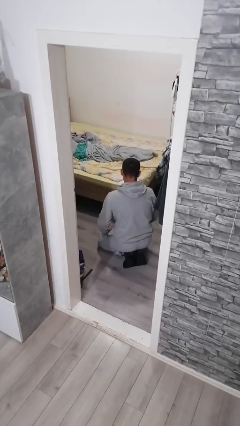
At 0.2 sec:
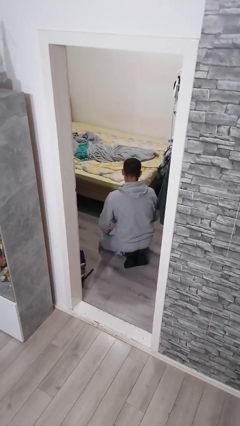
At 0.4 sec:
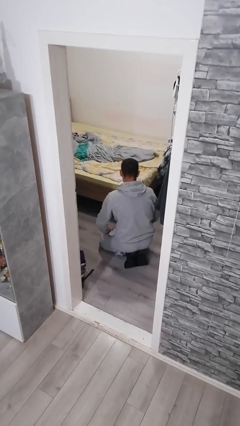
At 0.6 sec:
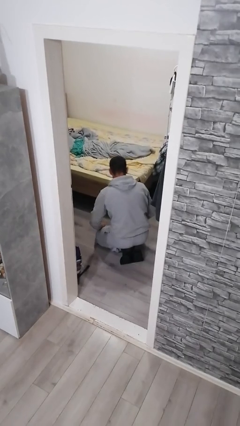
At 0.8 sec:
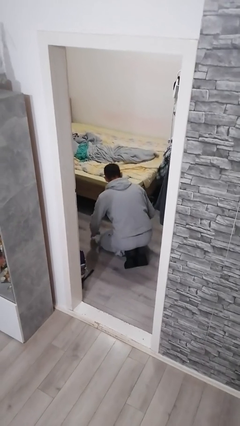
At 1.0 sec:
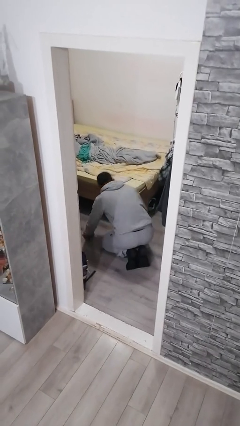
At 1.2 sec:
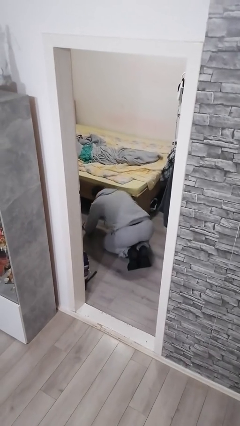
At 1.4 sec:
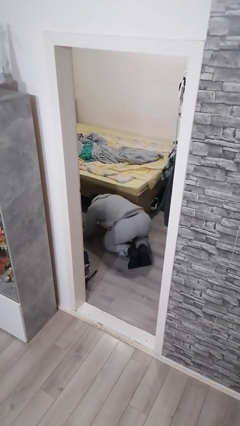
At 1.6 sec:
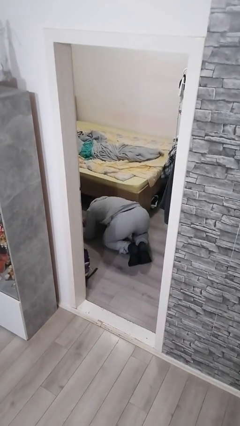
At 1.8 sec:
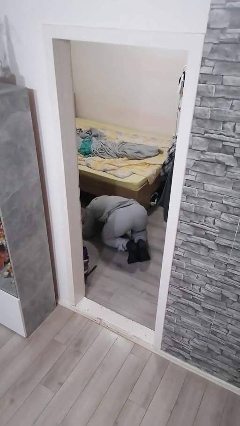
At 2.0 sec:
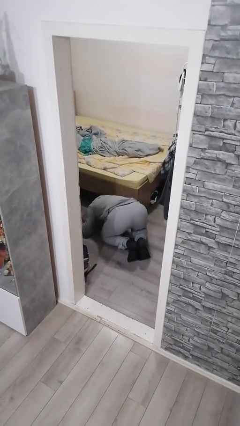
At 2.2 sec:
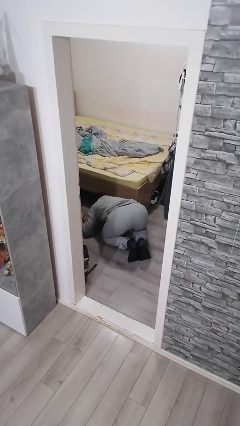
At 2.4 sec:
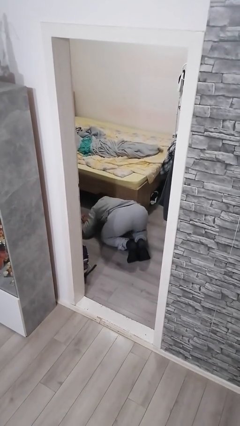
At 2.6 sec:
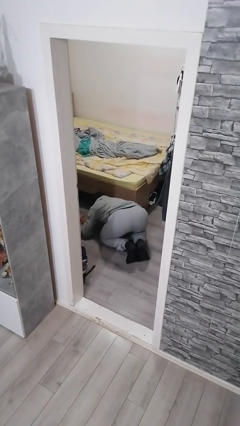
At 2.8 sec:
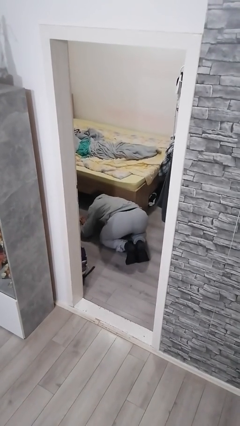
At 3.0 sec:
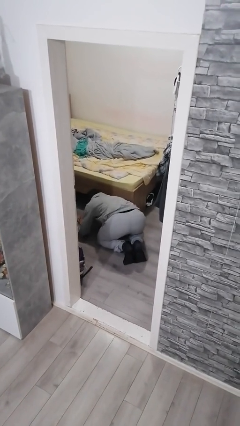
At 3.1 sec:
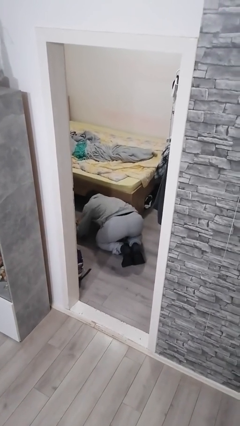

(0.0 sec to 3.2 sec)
person searches under bed

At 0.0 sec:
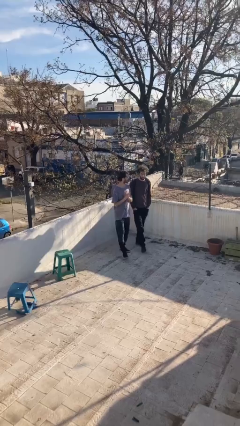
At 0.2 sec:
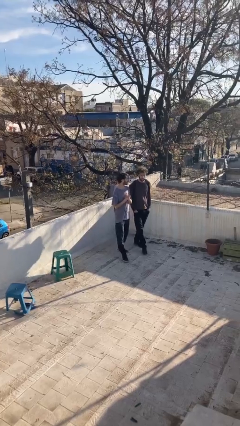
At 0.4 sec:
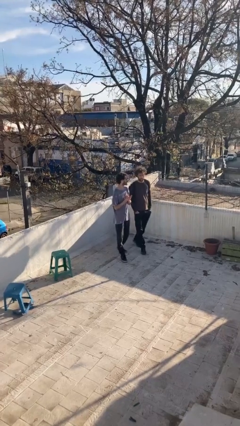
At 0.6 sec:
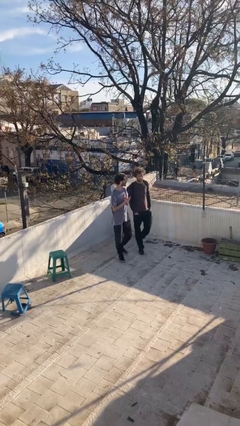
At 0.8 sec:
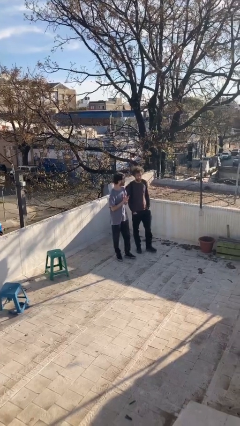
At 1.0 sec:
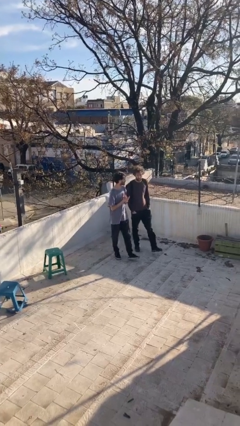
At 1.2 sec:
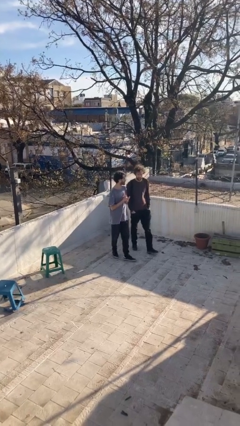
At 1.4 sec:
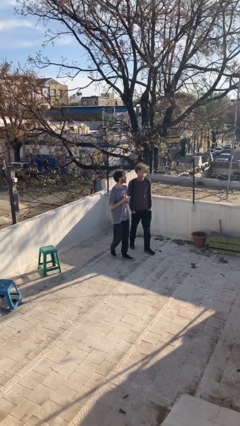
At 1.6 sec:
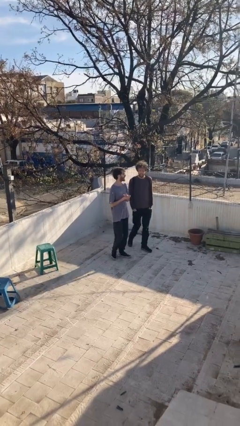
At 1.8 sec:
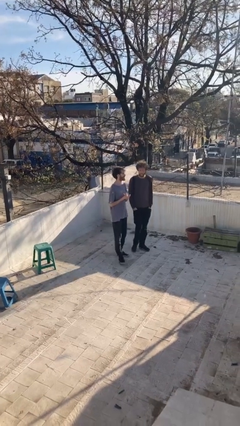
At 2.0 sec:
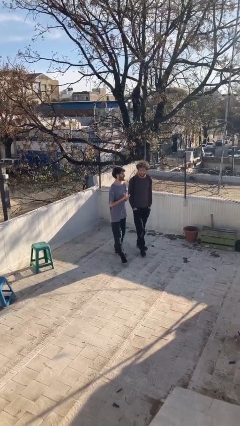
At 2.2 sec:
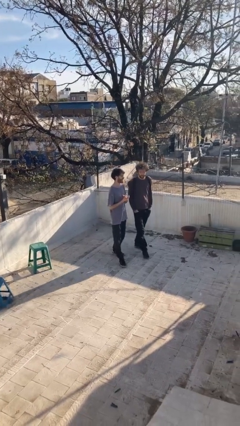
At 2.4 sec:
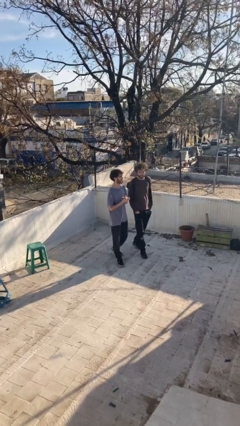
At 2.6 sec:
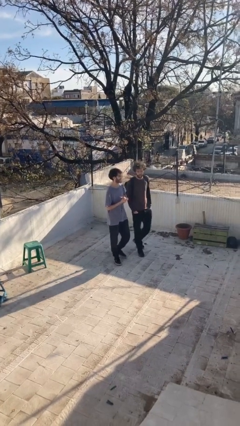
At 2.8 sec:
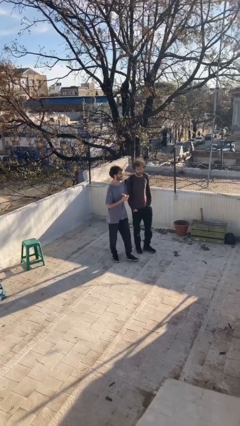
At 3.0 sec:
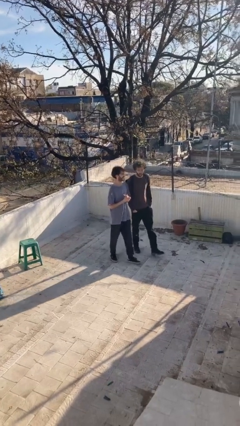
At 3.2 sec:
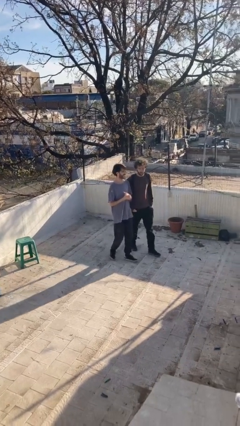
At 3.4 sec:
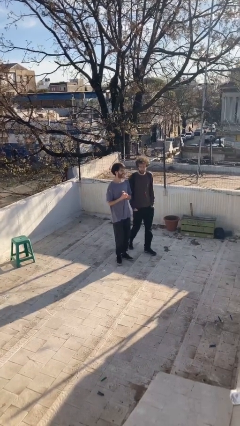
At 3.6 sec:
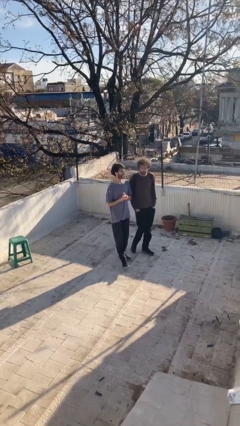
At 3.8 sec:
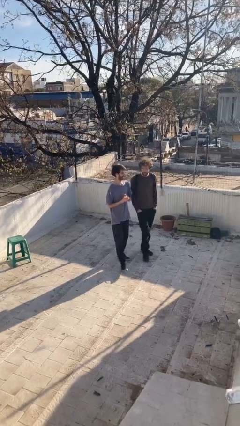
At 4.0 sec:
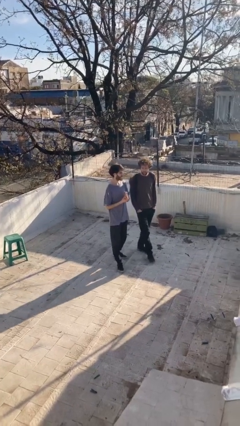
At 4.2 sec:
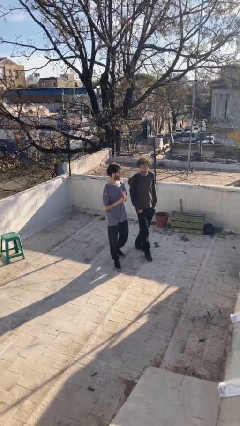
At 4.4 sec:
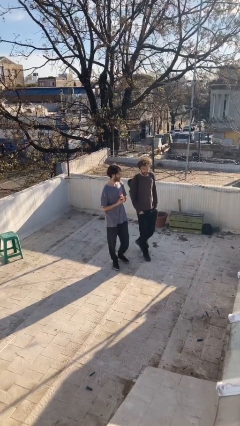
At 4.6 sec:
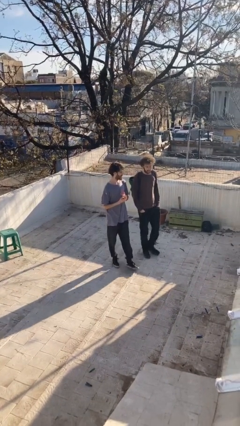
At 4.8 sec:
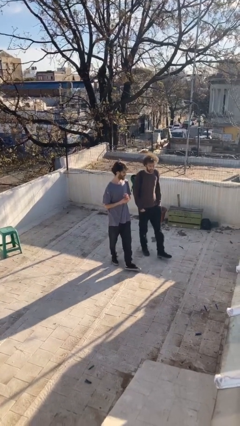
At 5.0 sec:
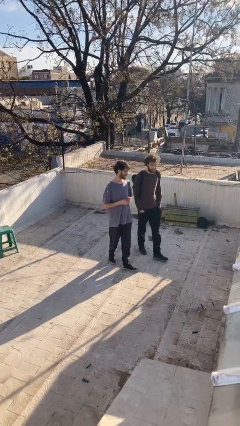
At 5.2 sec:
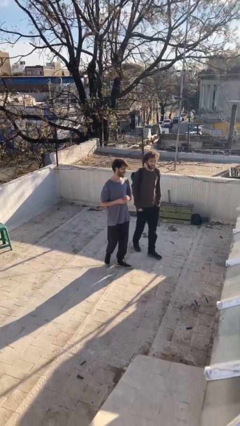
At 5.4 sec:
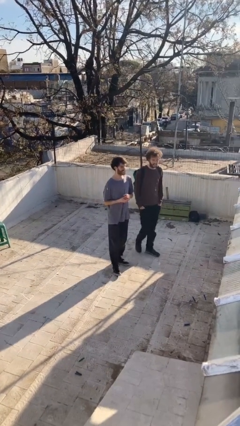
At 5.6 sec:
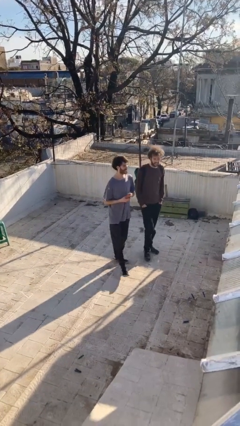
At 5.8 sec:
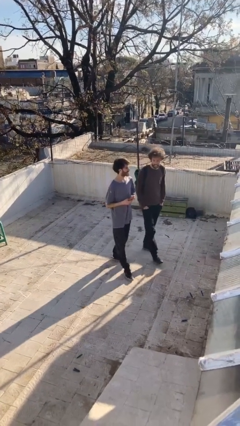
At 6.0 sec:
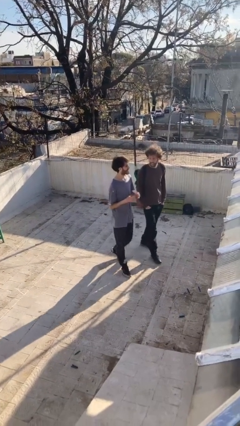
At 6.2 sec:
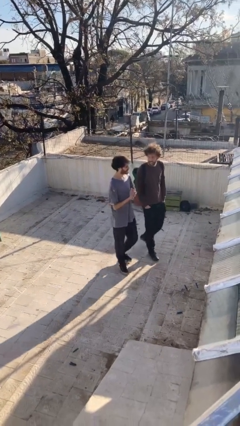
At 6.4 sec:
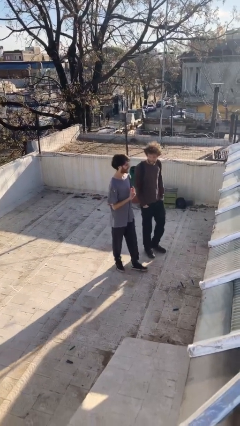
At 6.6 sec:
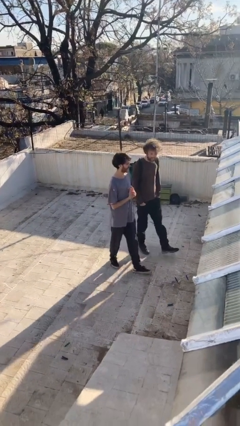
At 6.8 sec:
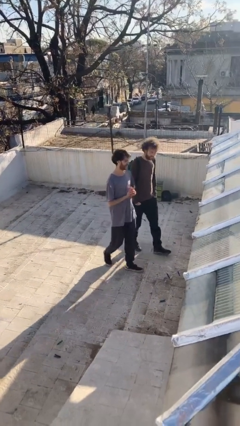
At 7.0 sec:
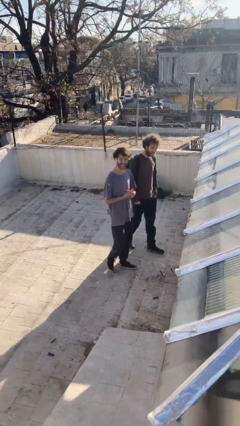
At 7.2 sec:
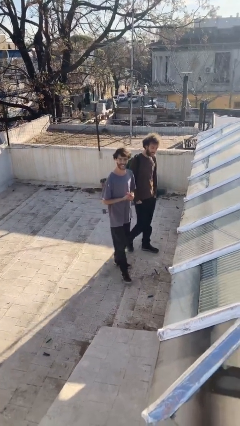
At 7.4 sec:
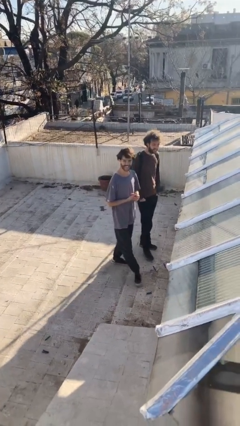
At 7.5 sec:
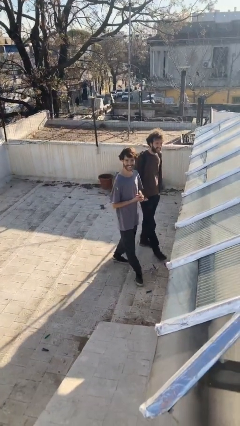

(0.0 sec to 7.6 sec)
person talks to person

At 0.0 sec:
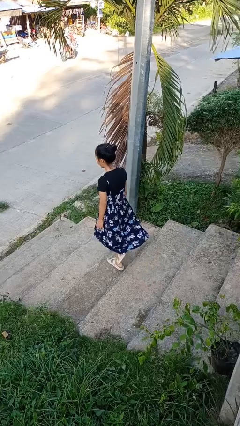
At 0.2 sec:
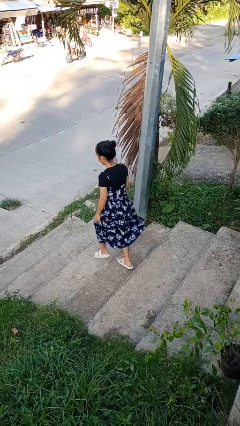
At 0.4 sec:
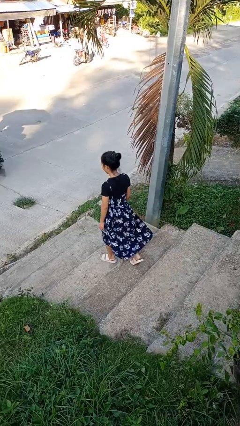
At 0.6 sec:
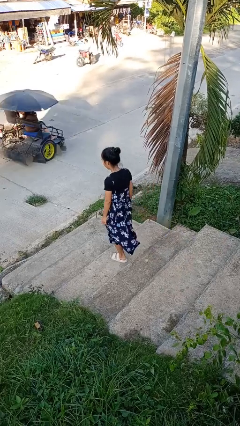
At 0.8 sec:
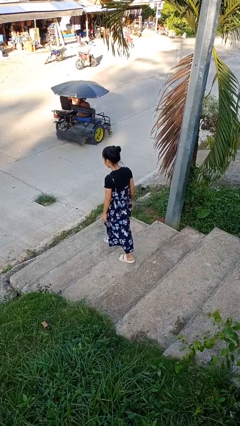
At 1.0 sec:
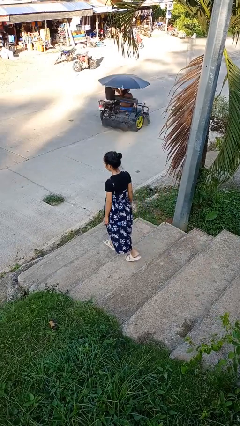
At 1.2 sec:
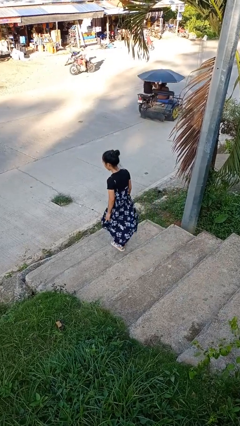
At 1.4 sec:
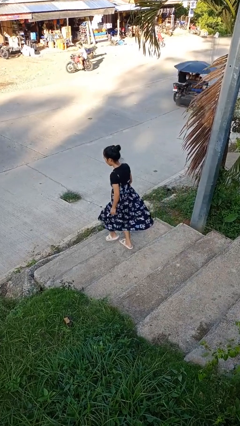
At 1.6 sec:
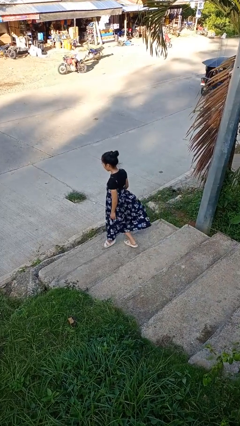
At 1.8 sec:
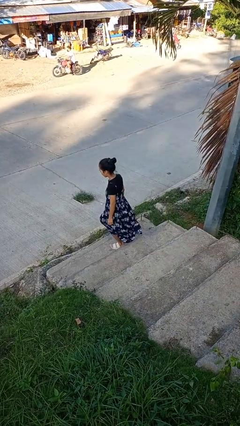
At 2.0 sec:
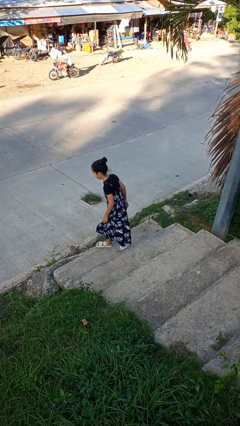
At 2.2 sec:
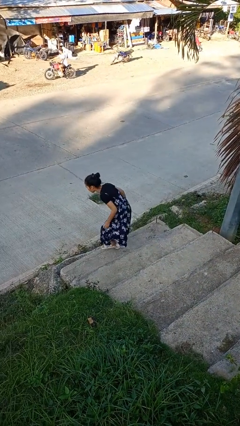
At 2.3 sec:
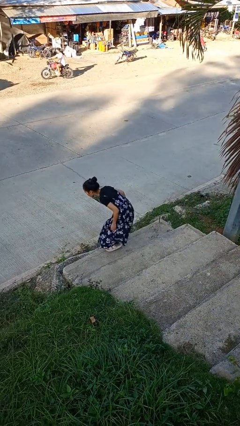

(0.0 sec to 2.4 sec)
person climbs down stairs

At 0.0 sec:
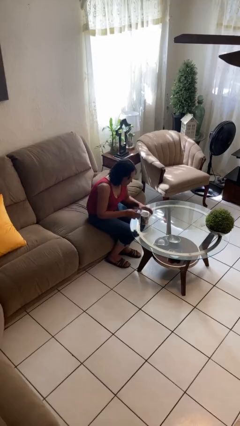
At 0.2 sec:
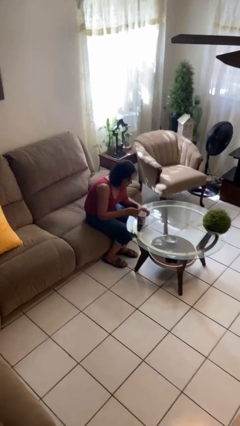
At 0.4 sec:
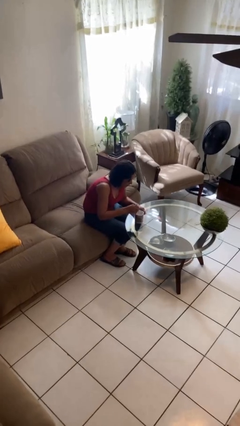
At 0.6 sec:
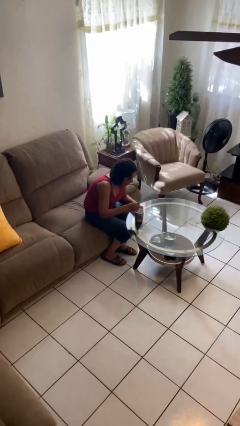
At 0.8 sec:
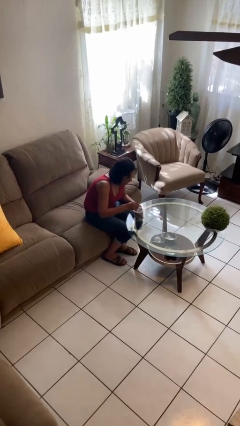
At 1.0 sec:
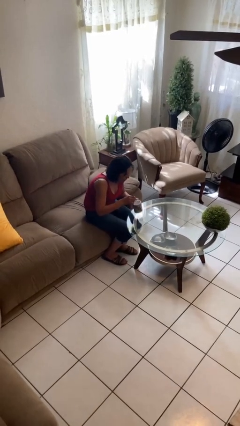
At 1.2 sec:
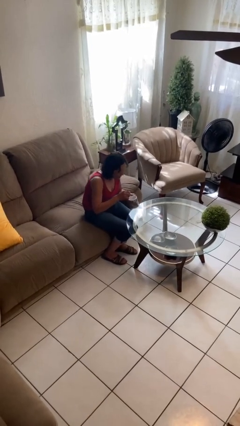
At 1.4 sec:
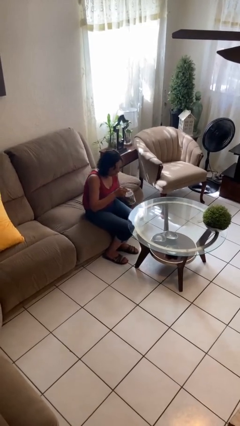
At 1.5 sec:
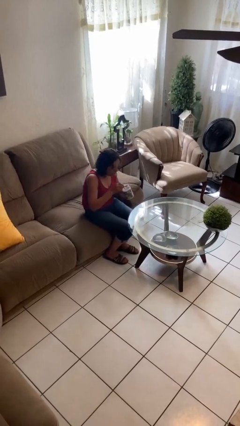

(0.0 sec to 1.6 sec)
person stirs mug

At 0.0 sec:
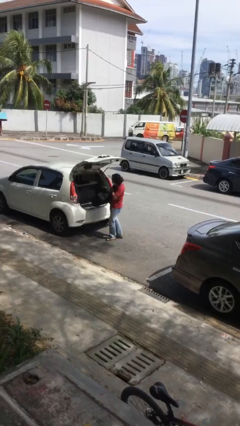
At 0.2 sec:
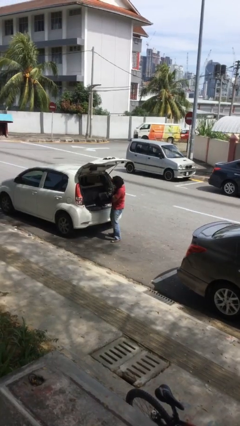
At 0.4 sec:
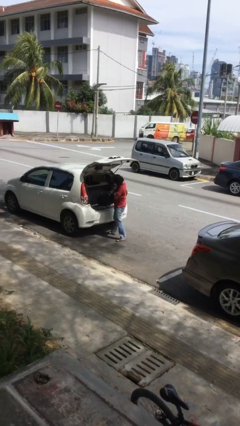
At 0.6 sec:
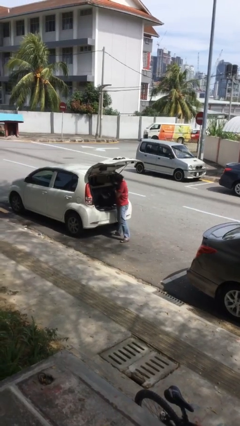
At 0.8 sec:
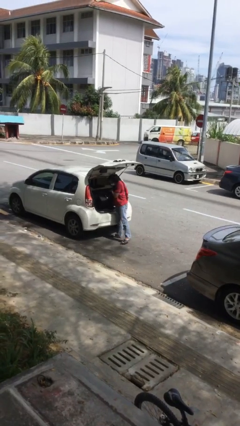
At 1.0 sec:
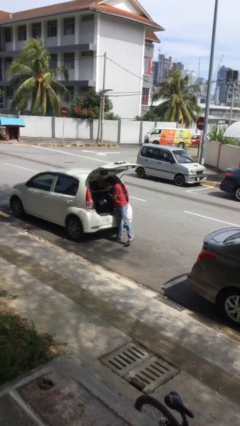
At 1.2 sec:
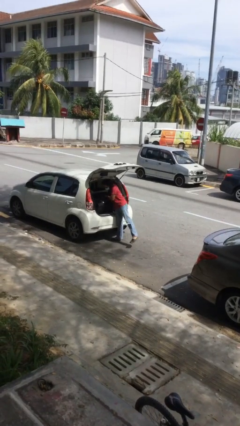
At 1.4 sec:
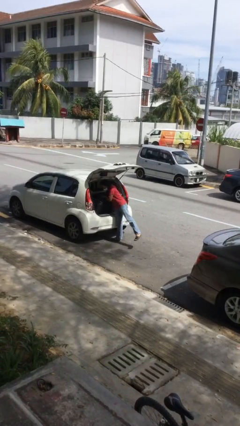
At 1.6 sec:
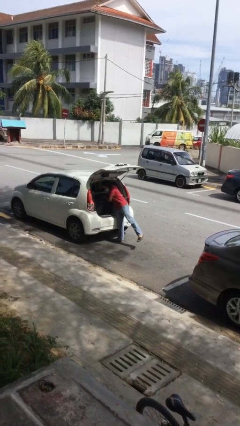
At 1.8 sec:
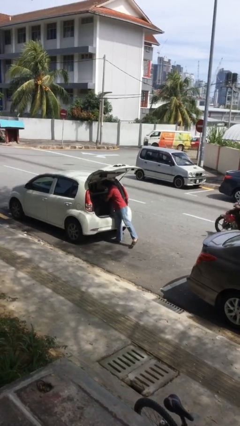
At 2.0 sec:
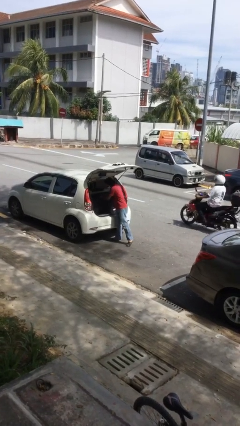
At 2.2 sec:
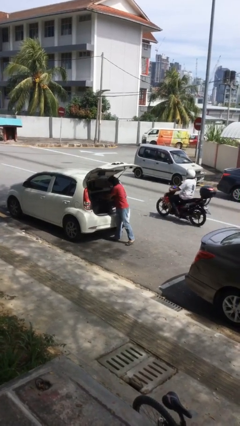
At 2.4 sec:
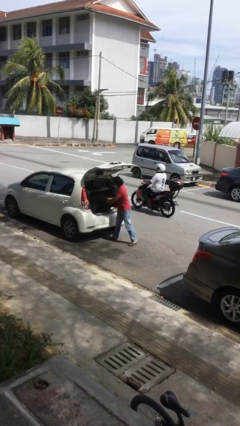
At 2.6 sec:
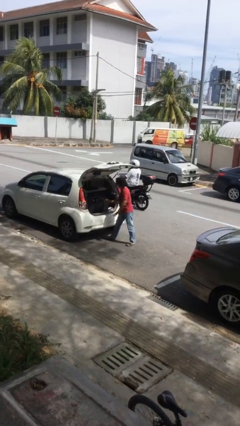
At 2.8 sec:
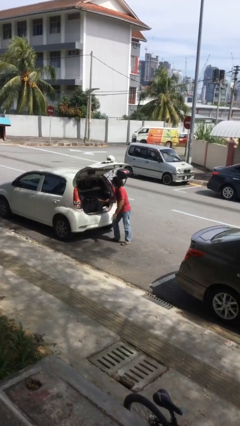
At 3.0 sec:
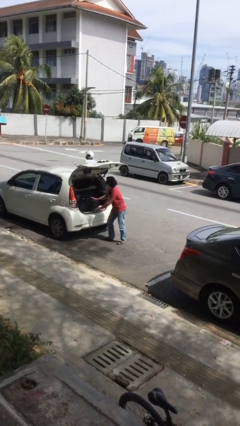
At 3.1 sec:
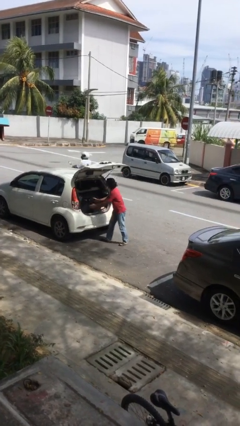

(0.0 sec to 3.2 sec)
person loads car
